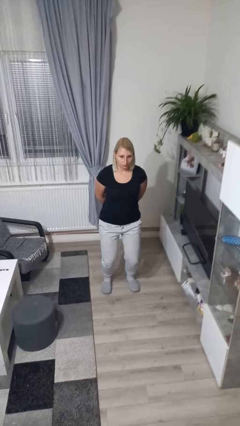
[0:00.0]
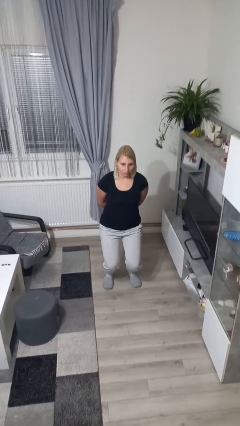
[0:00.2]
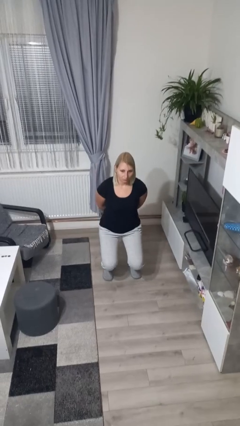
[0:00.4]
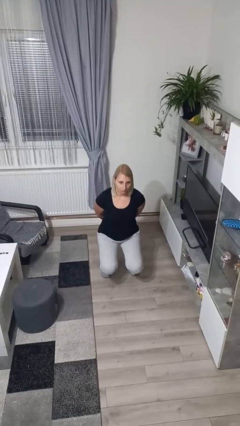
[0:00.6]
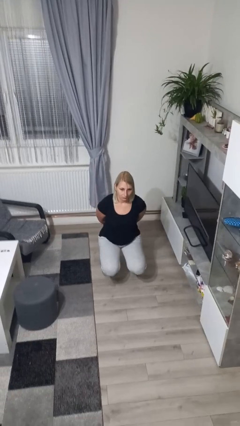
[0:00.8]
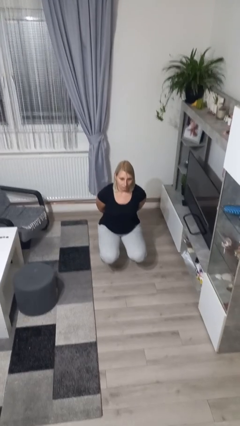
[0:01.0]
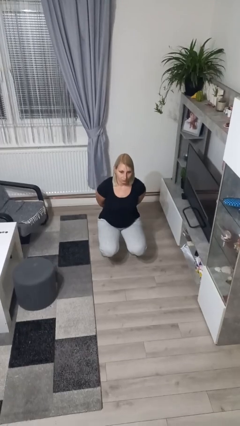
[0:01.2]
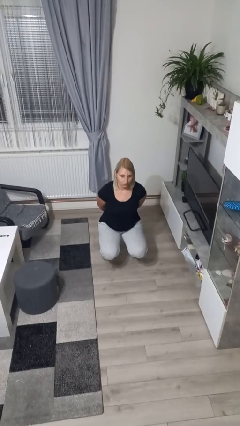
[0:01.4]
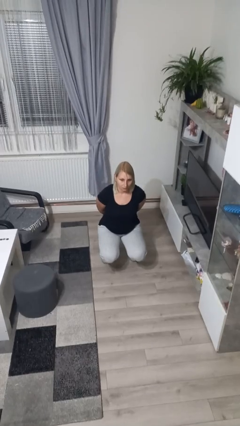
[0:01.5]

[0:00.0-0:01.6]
person squats

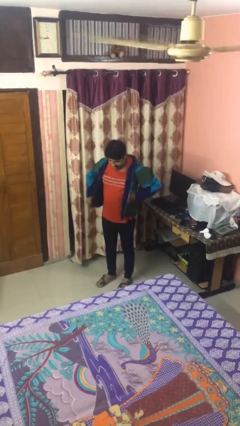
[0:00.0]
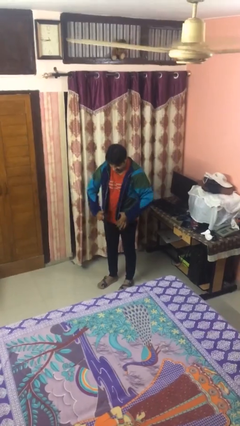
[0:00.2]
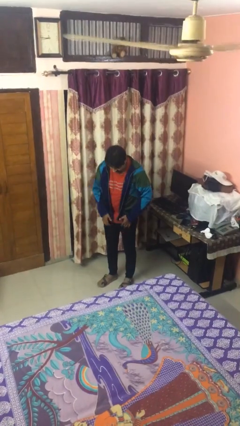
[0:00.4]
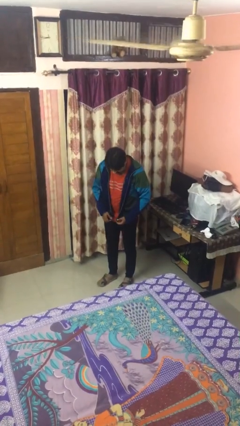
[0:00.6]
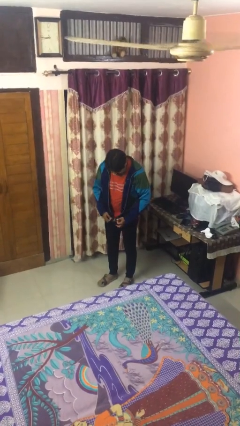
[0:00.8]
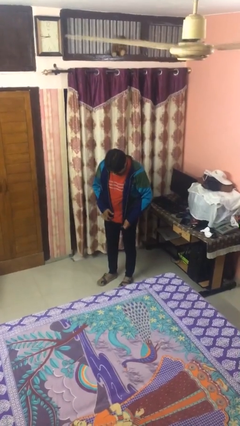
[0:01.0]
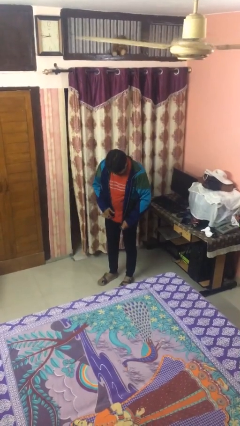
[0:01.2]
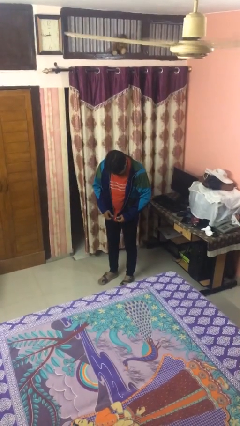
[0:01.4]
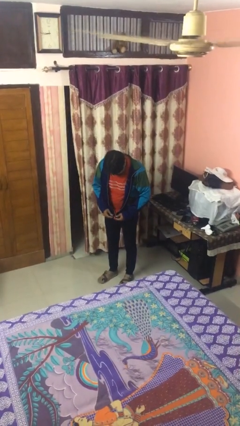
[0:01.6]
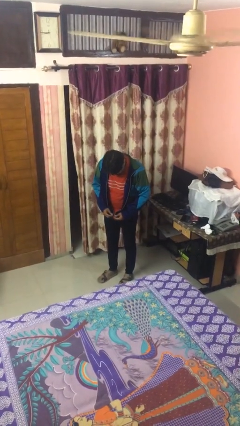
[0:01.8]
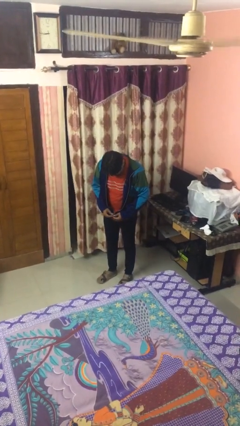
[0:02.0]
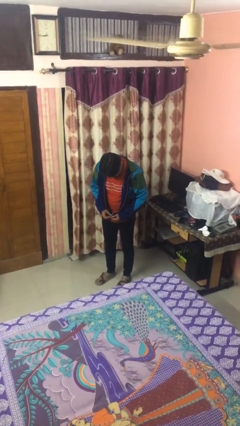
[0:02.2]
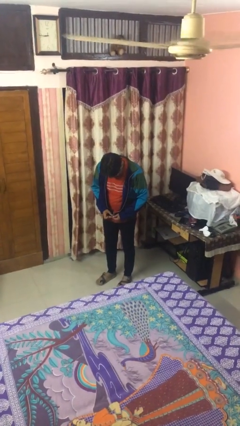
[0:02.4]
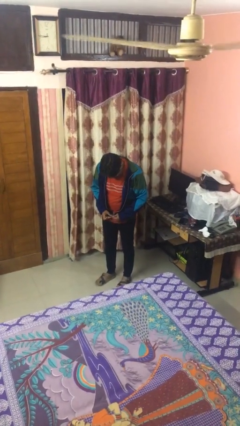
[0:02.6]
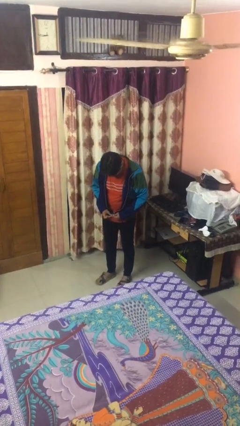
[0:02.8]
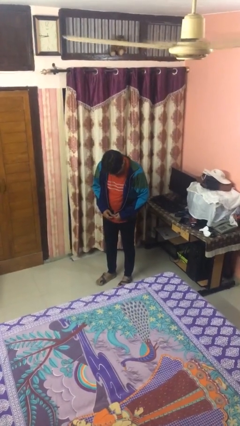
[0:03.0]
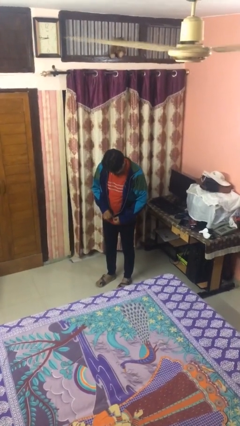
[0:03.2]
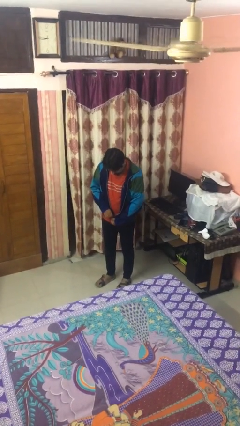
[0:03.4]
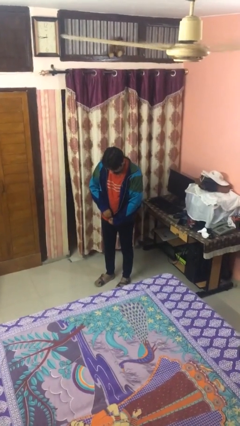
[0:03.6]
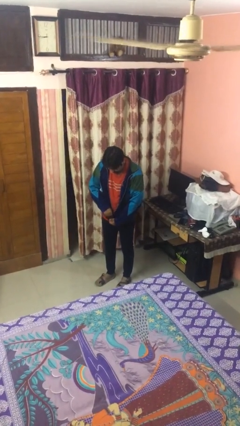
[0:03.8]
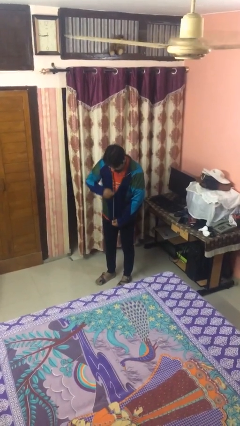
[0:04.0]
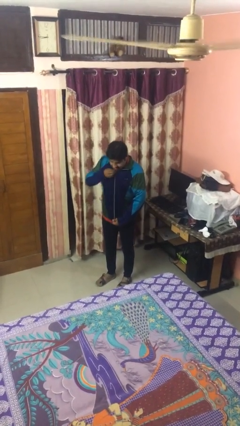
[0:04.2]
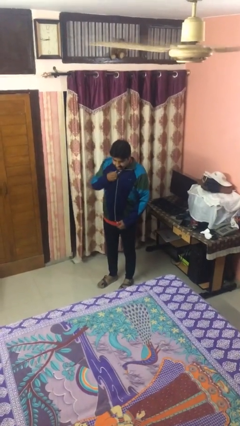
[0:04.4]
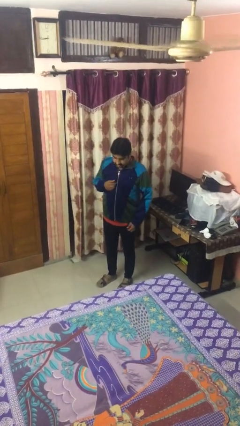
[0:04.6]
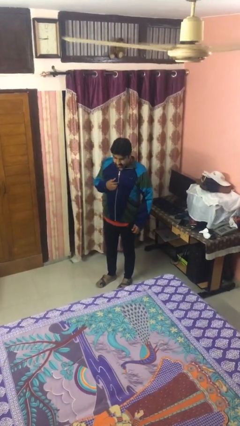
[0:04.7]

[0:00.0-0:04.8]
person zips up jacket

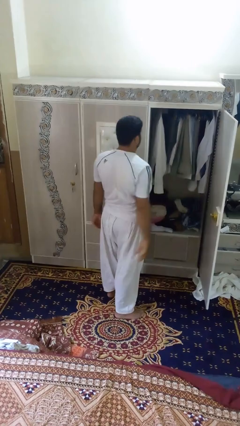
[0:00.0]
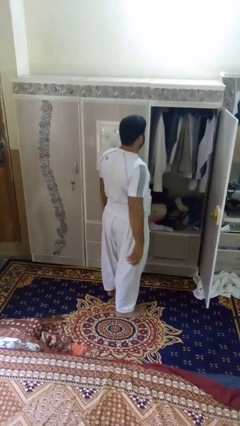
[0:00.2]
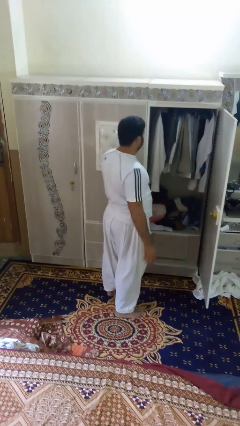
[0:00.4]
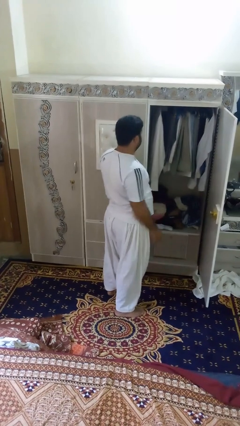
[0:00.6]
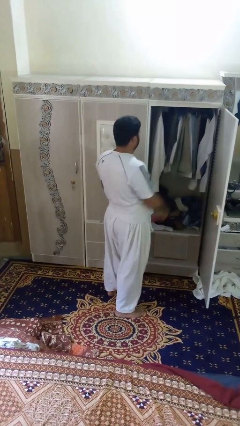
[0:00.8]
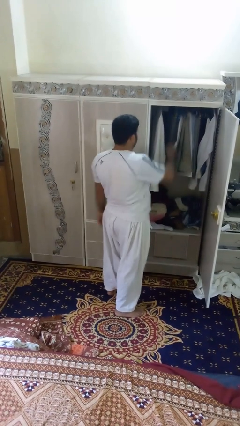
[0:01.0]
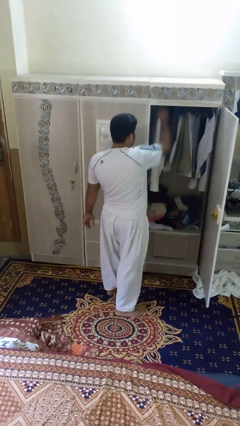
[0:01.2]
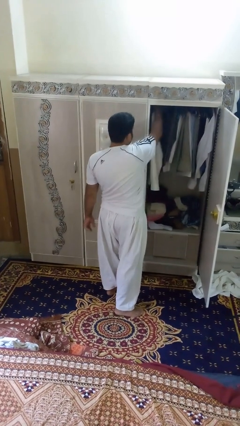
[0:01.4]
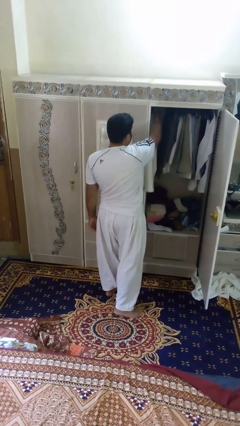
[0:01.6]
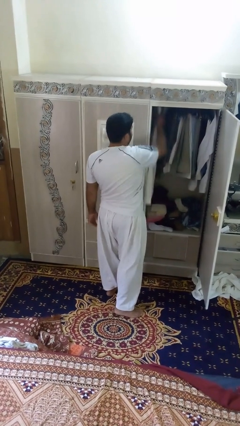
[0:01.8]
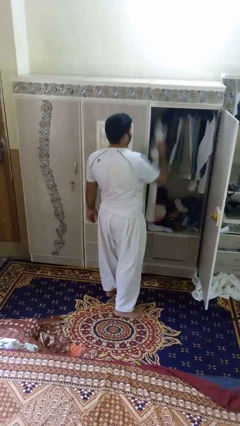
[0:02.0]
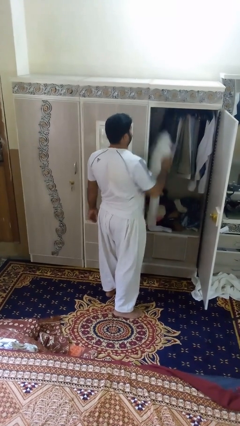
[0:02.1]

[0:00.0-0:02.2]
person takes clothes from closet

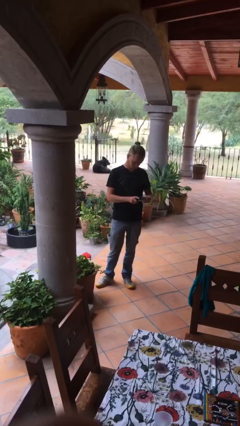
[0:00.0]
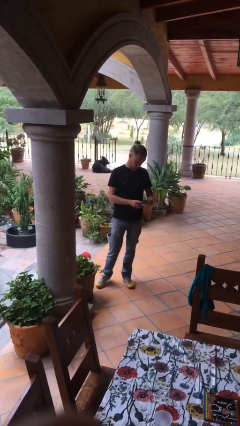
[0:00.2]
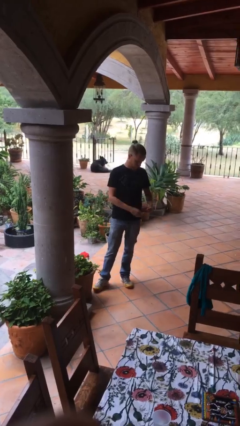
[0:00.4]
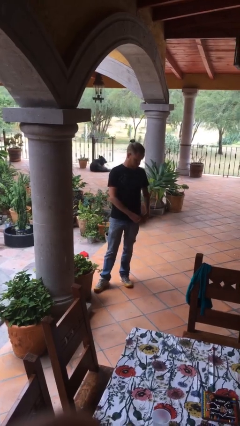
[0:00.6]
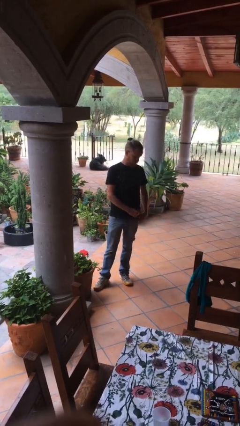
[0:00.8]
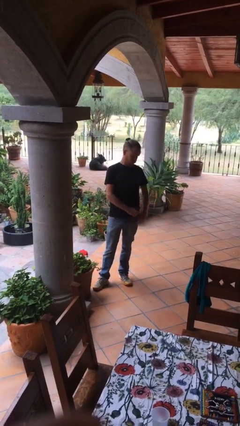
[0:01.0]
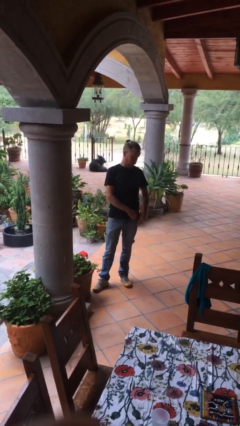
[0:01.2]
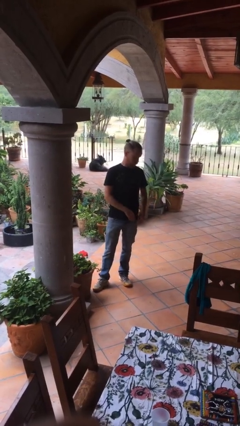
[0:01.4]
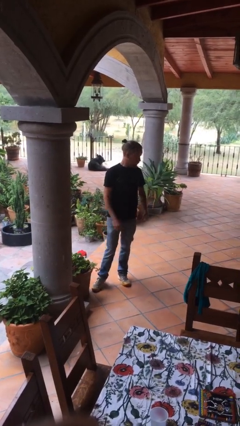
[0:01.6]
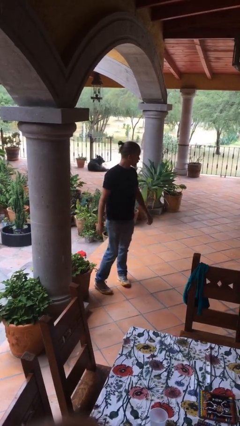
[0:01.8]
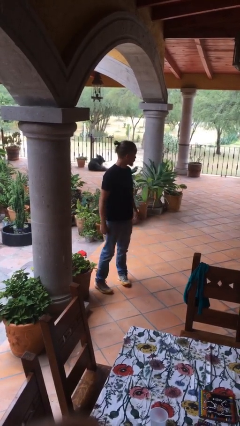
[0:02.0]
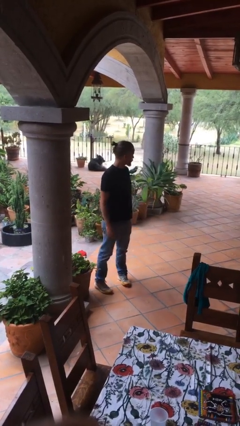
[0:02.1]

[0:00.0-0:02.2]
person puts phone into pocket

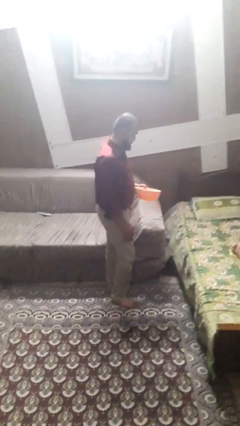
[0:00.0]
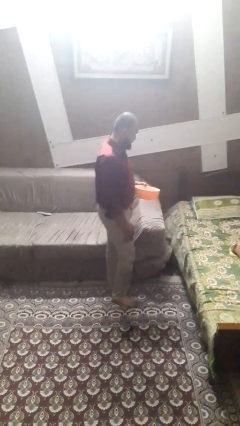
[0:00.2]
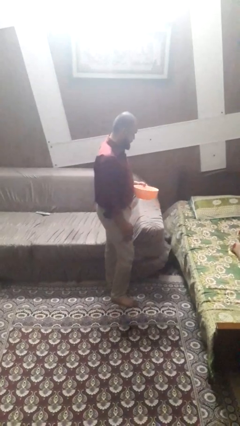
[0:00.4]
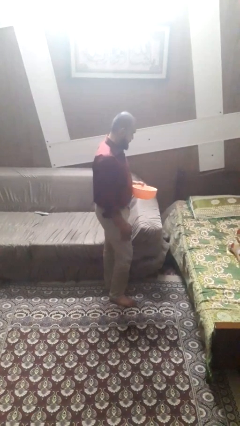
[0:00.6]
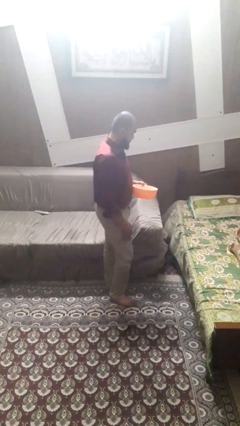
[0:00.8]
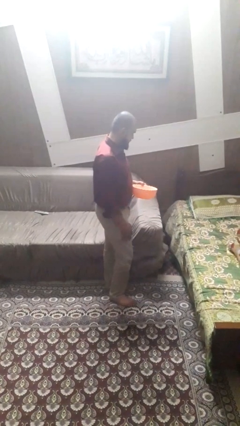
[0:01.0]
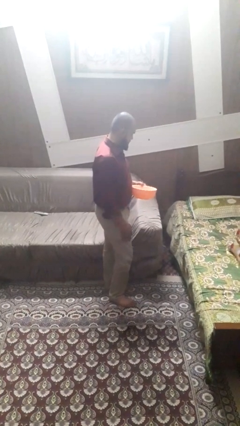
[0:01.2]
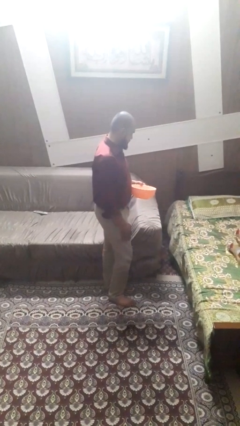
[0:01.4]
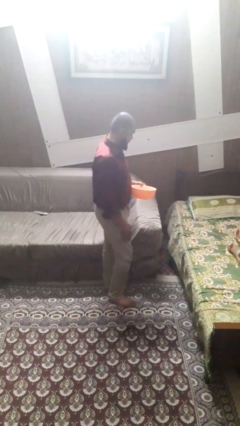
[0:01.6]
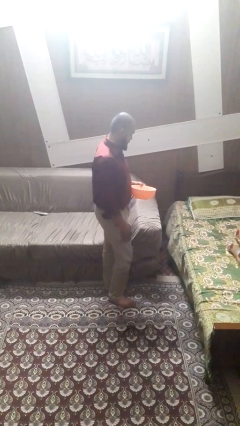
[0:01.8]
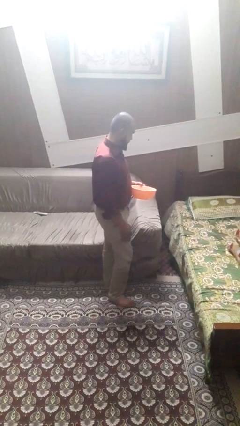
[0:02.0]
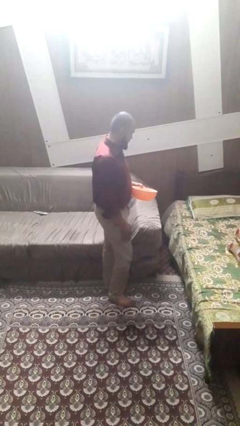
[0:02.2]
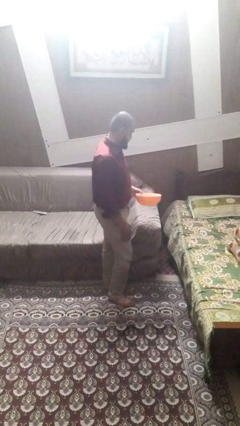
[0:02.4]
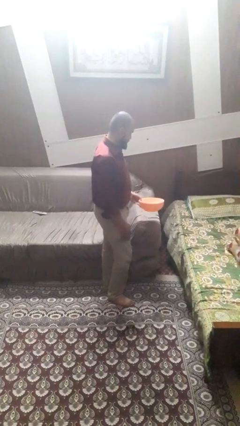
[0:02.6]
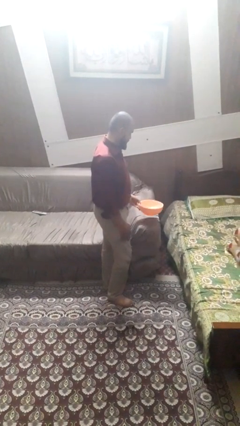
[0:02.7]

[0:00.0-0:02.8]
person picks up object from countertop

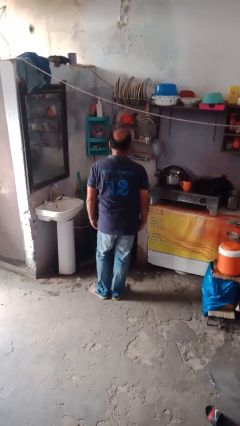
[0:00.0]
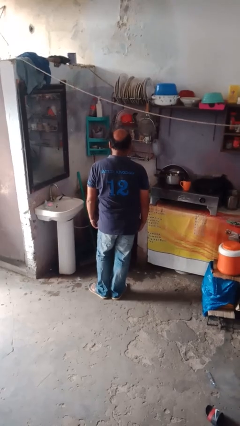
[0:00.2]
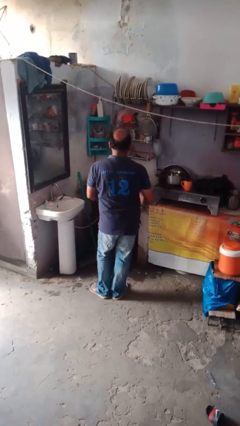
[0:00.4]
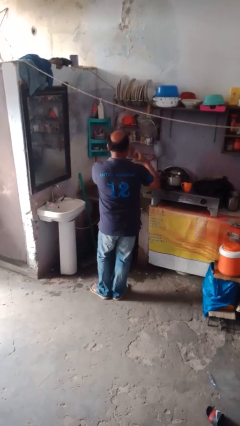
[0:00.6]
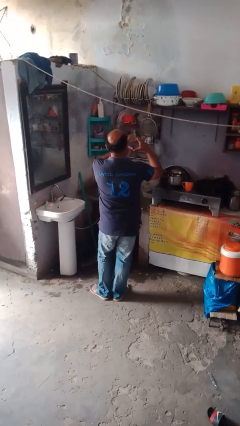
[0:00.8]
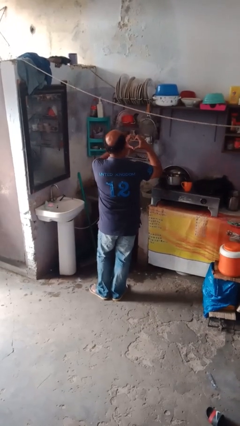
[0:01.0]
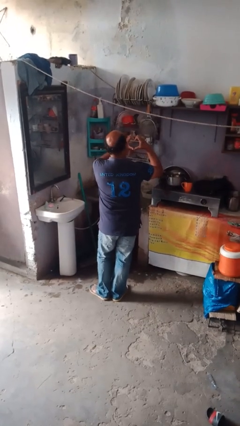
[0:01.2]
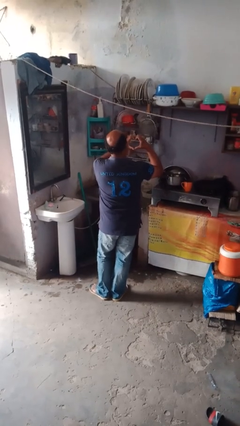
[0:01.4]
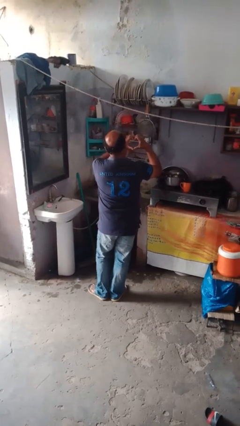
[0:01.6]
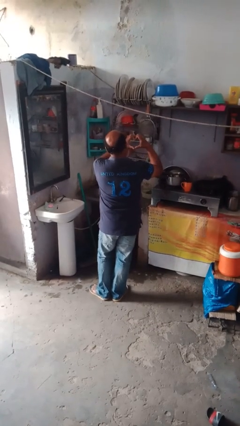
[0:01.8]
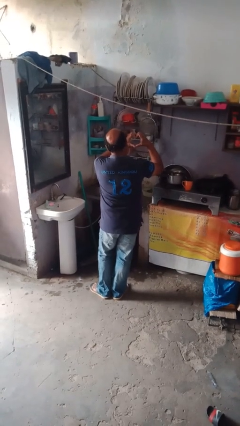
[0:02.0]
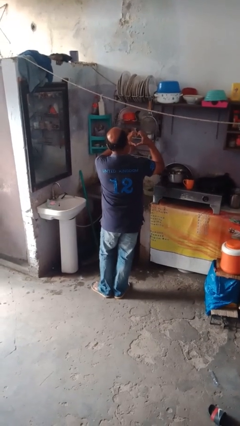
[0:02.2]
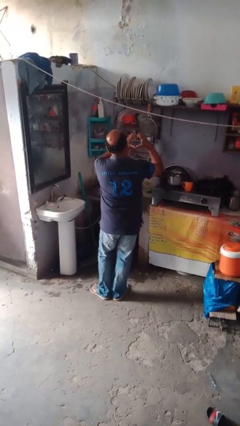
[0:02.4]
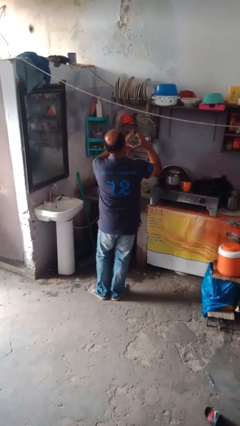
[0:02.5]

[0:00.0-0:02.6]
person gestures heart

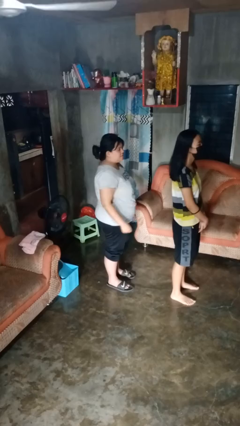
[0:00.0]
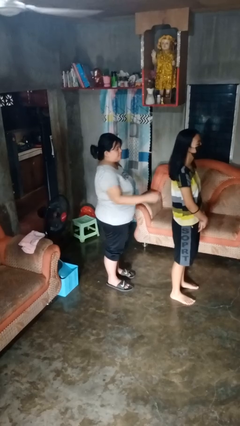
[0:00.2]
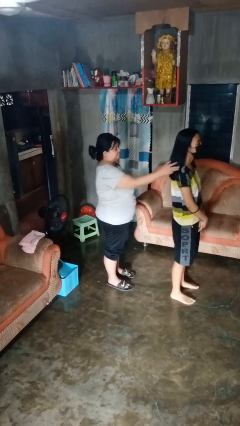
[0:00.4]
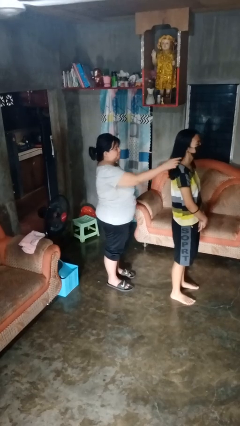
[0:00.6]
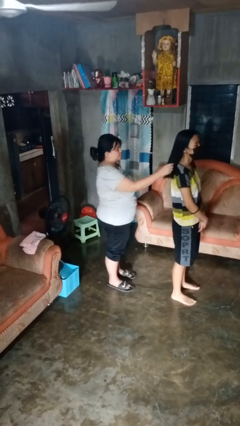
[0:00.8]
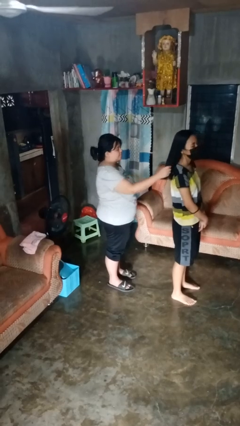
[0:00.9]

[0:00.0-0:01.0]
person grabs person by hair
